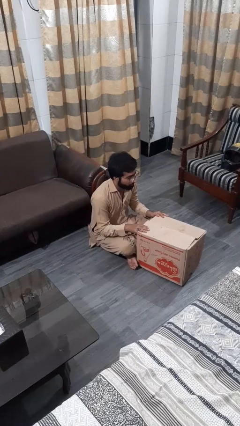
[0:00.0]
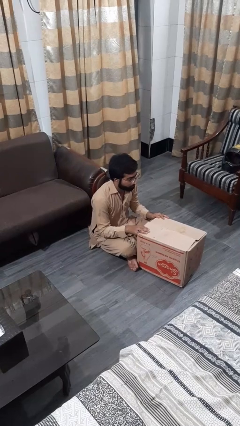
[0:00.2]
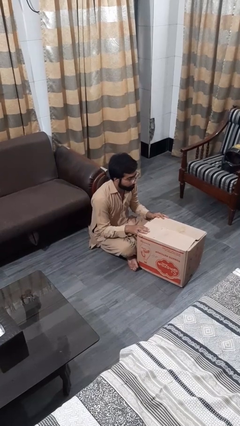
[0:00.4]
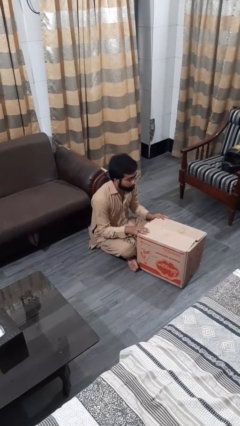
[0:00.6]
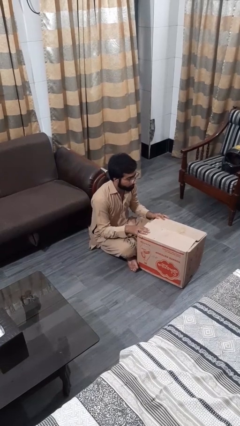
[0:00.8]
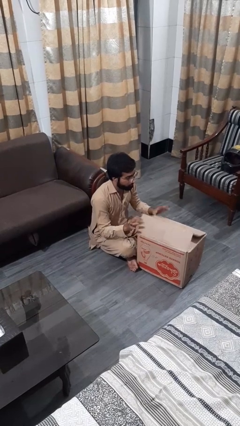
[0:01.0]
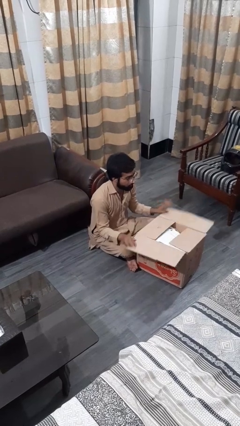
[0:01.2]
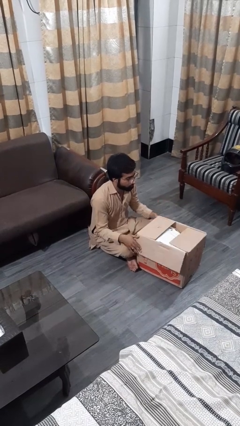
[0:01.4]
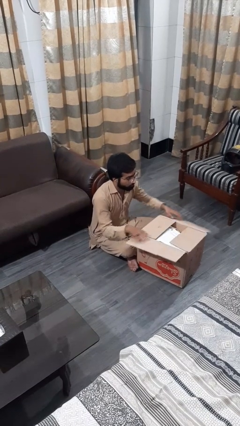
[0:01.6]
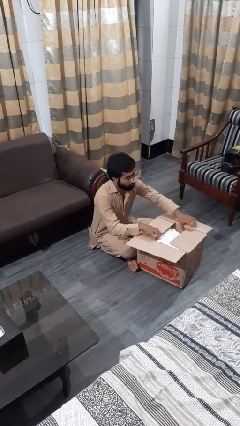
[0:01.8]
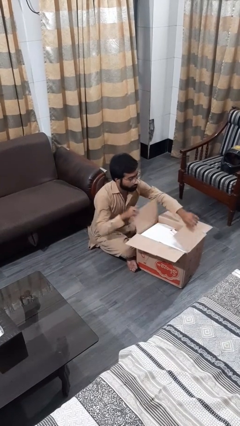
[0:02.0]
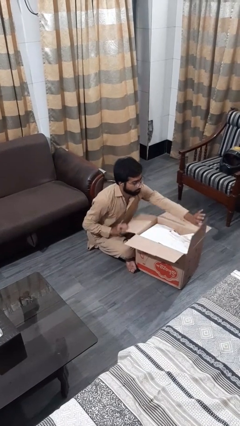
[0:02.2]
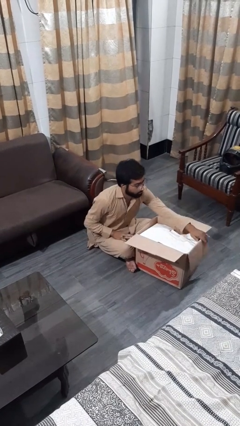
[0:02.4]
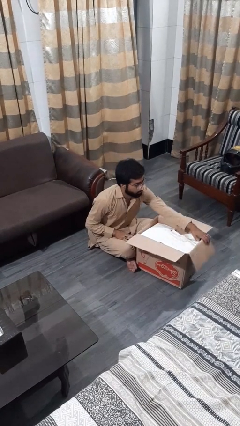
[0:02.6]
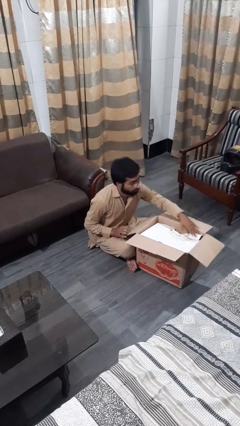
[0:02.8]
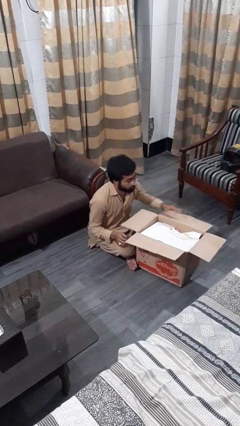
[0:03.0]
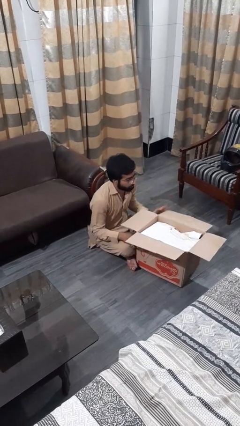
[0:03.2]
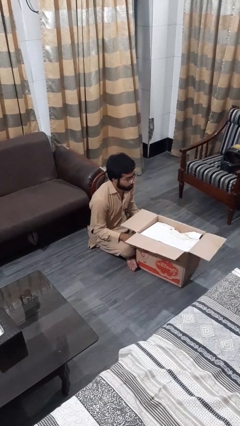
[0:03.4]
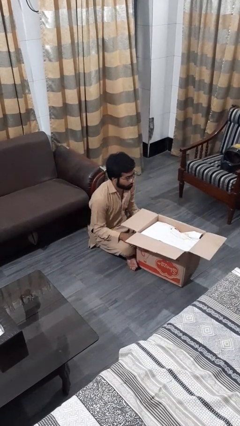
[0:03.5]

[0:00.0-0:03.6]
person opens box

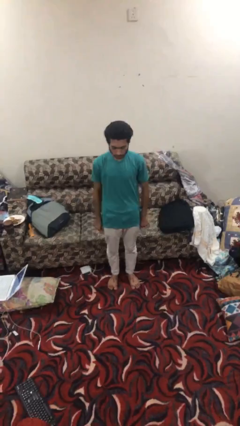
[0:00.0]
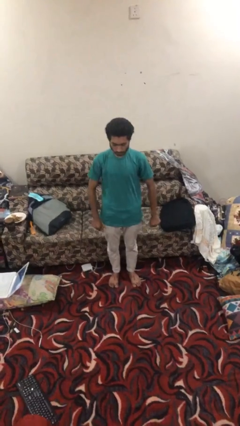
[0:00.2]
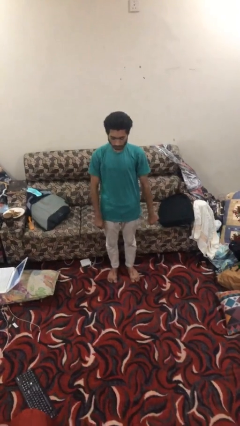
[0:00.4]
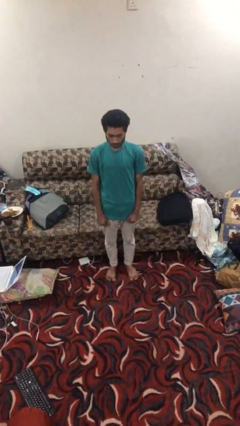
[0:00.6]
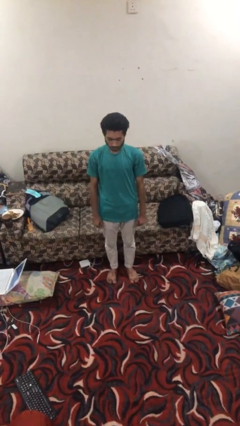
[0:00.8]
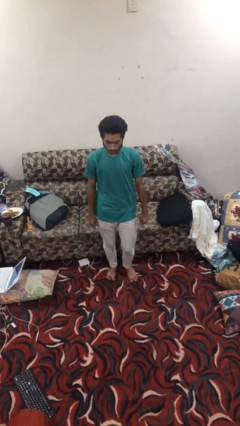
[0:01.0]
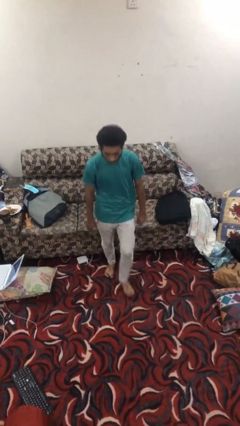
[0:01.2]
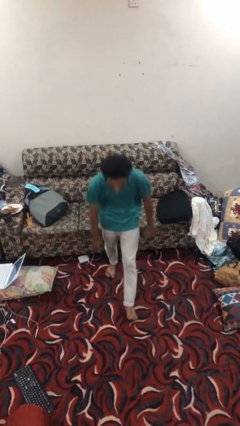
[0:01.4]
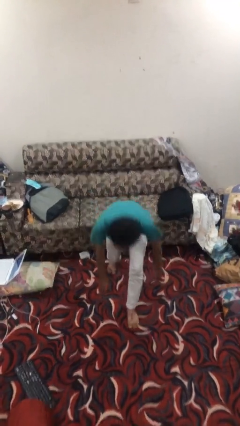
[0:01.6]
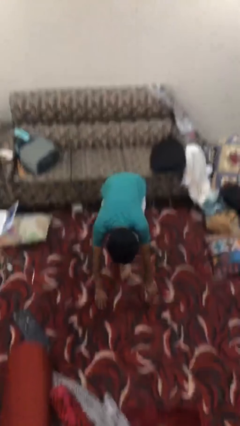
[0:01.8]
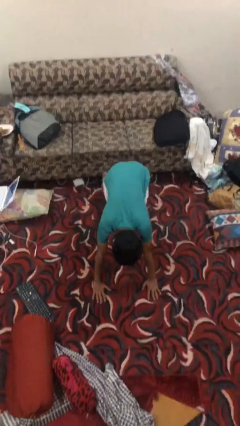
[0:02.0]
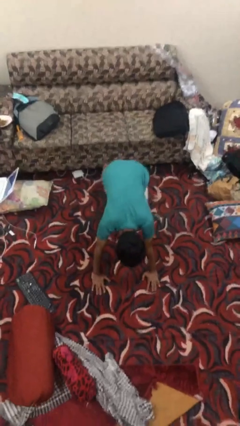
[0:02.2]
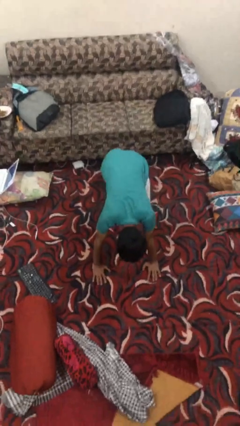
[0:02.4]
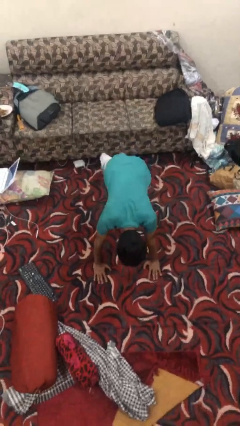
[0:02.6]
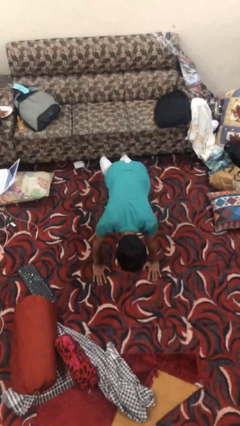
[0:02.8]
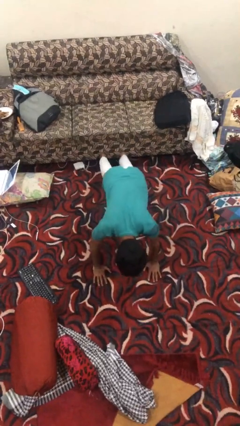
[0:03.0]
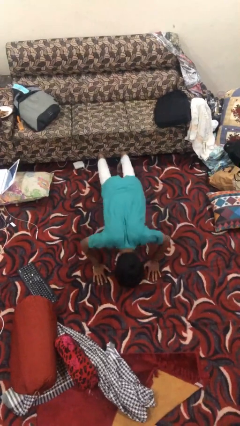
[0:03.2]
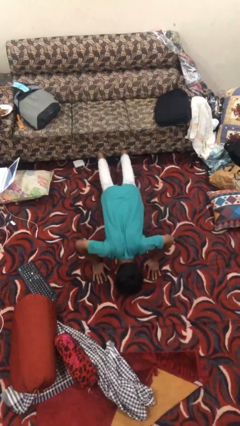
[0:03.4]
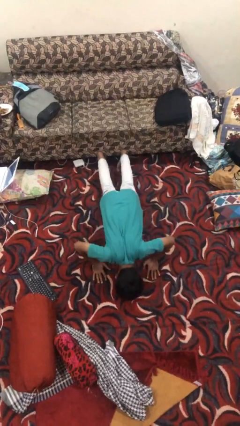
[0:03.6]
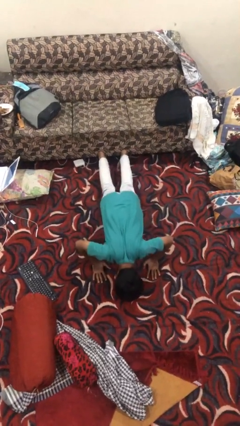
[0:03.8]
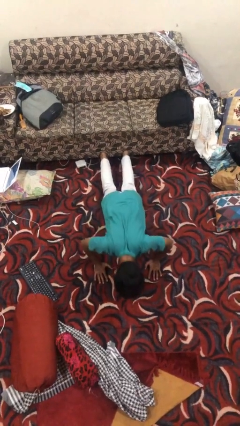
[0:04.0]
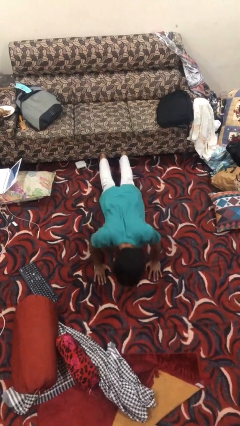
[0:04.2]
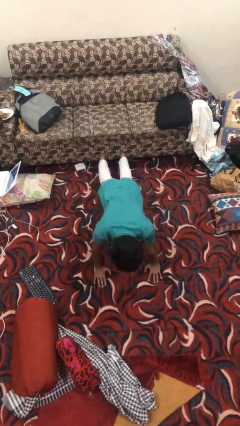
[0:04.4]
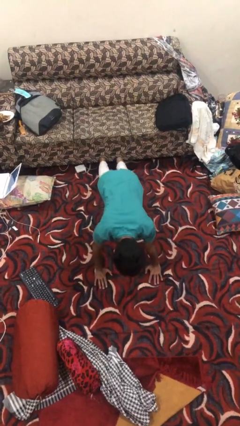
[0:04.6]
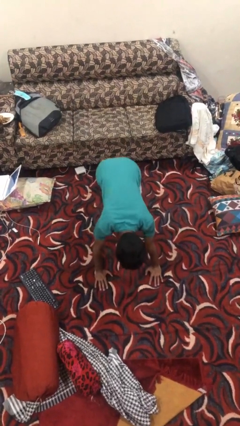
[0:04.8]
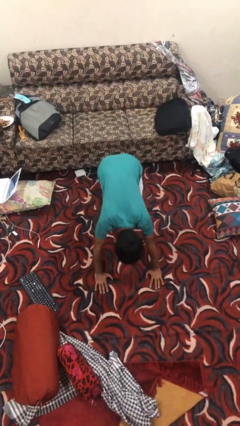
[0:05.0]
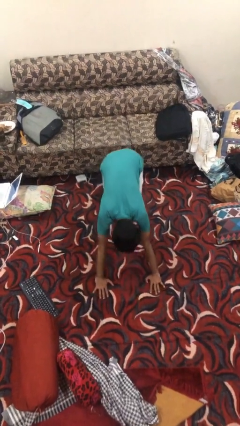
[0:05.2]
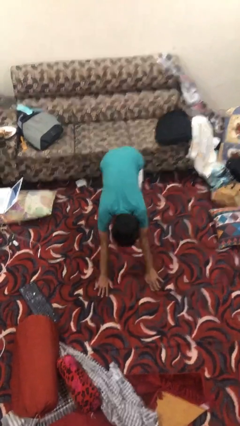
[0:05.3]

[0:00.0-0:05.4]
person exercises with pushup

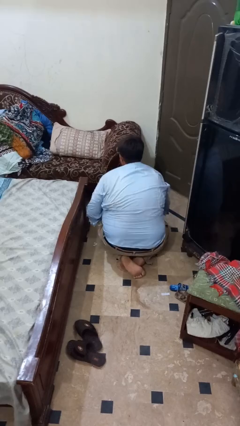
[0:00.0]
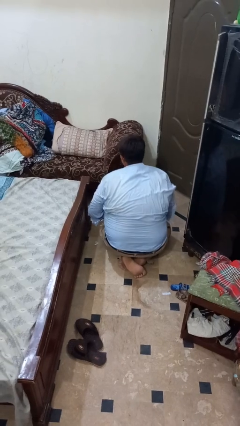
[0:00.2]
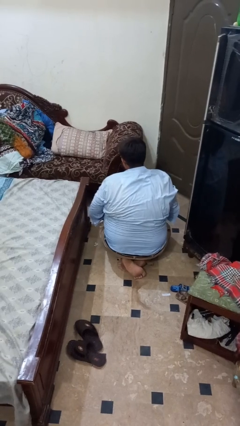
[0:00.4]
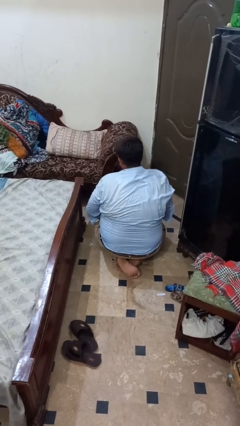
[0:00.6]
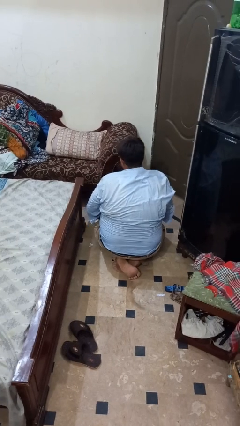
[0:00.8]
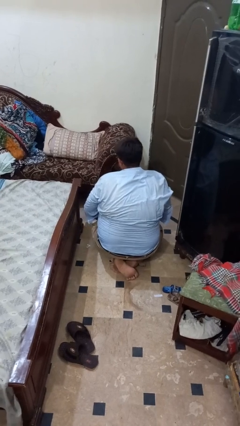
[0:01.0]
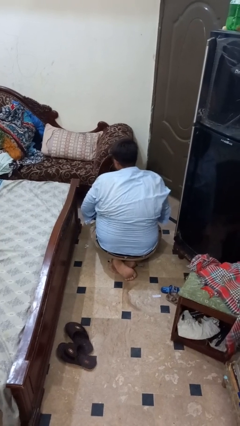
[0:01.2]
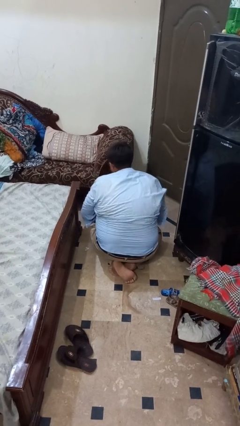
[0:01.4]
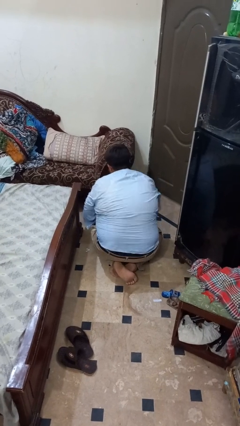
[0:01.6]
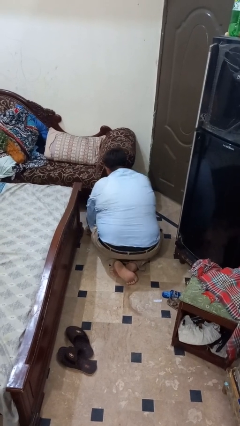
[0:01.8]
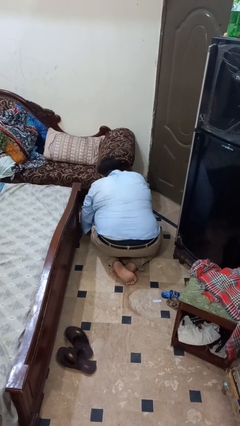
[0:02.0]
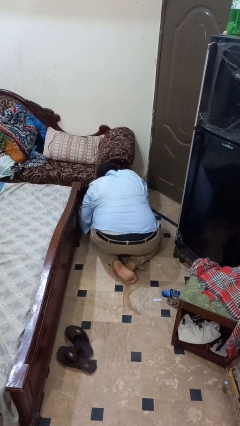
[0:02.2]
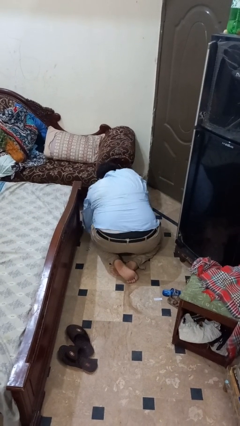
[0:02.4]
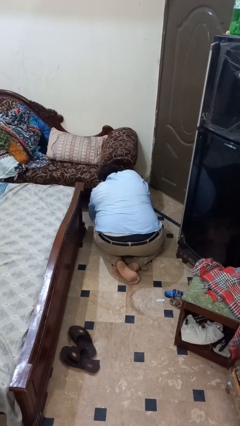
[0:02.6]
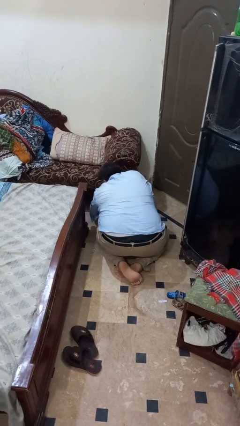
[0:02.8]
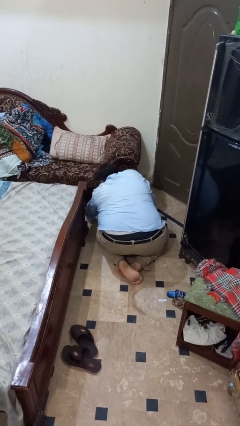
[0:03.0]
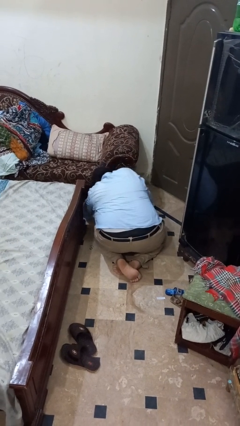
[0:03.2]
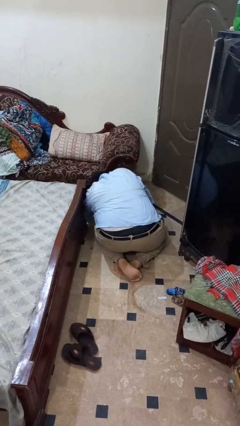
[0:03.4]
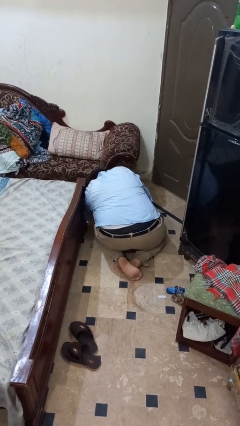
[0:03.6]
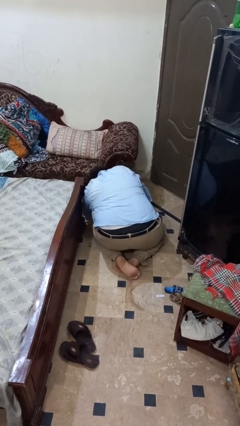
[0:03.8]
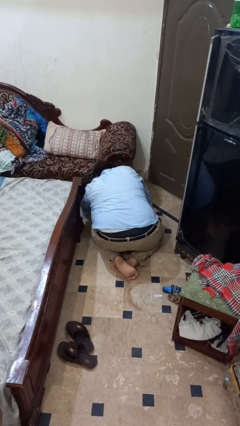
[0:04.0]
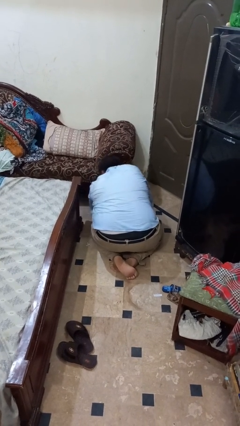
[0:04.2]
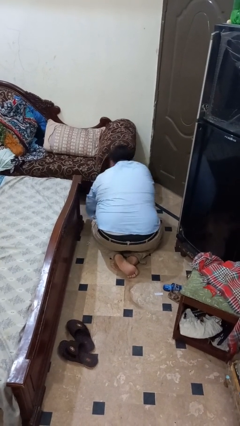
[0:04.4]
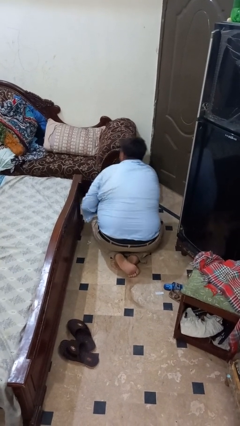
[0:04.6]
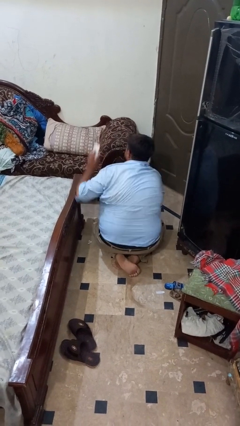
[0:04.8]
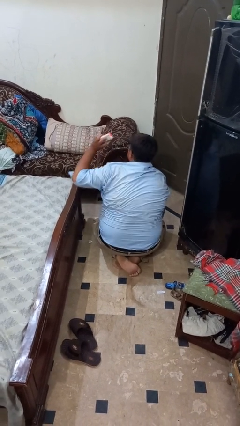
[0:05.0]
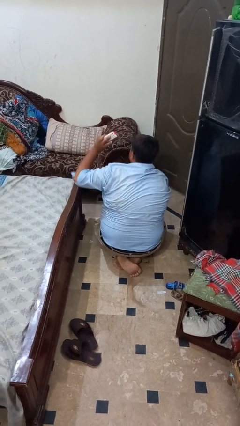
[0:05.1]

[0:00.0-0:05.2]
person searches under couch

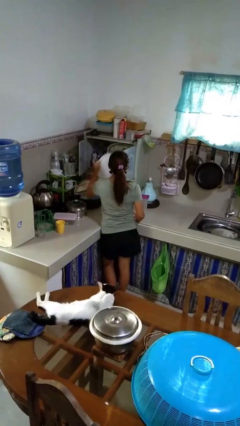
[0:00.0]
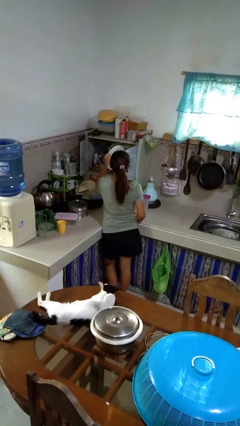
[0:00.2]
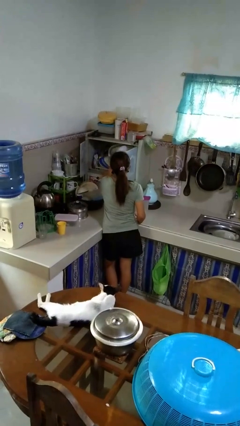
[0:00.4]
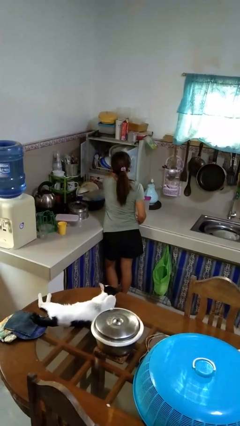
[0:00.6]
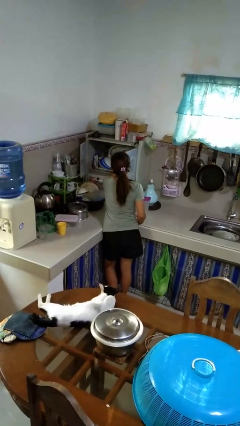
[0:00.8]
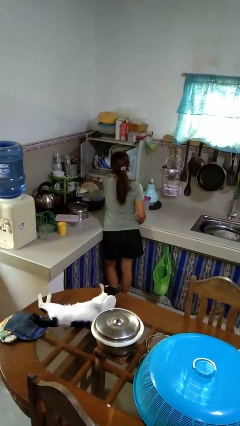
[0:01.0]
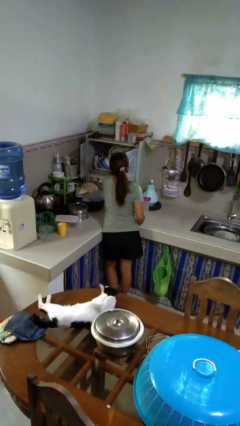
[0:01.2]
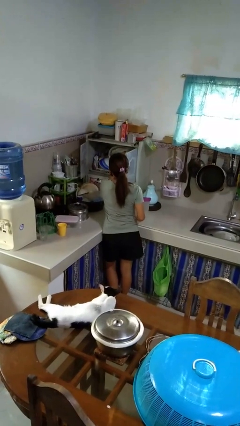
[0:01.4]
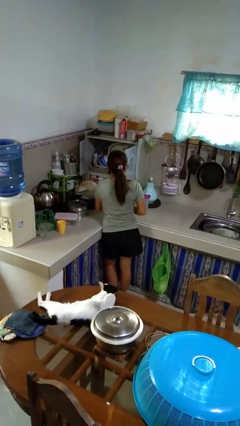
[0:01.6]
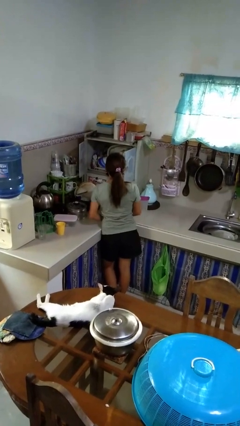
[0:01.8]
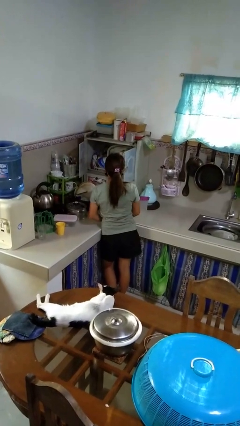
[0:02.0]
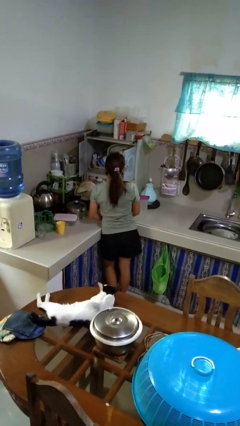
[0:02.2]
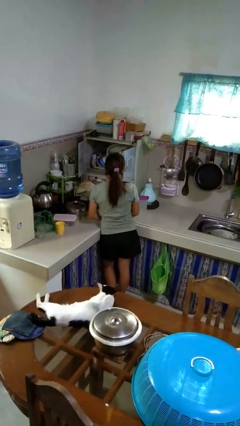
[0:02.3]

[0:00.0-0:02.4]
person puts object into kitchen drawer

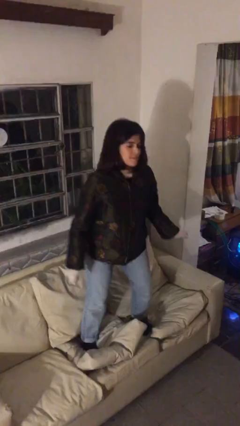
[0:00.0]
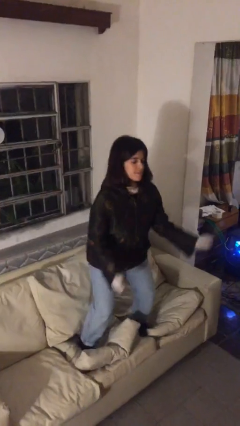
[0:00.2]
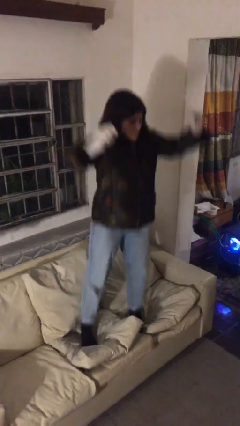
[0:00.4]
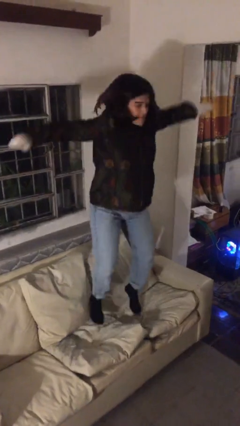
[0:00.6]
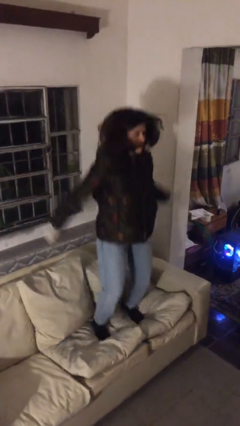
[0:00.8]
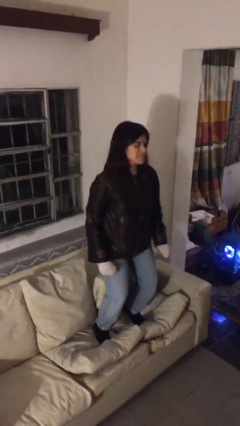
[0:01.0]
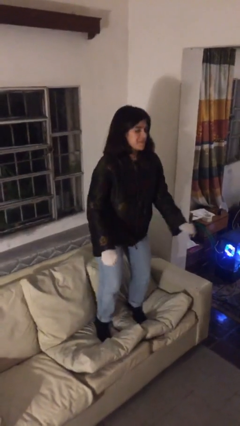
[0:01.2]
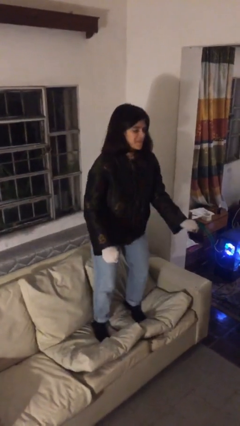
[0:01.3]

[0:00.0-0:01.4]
person jumps on couch
